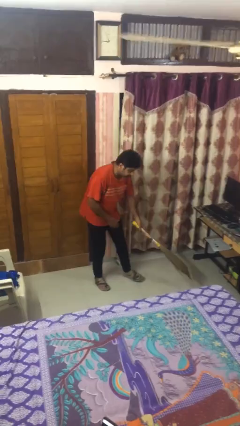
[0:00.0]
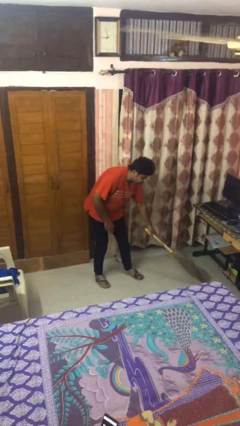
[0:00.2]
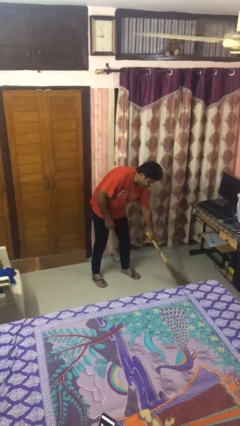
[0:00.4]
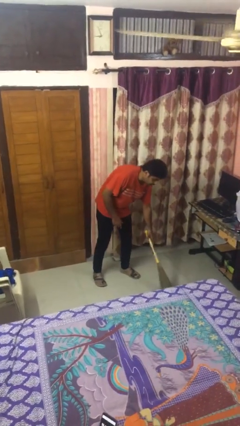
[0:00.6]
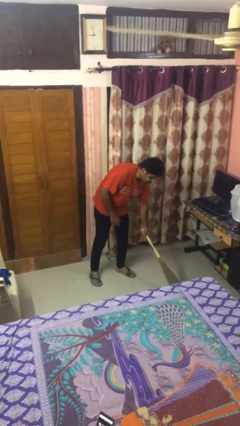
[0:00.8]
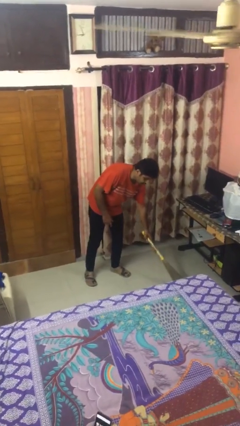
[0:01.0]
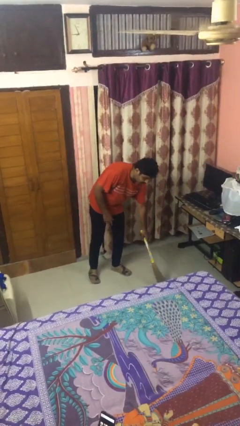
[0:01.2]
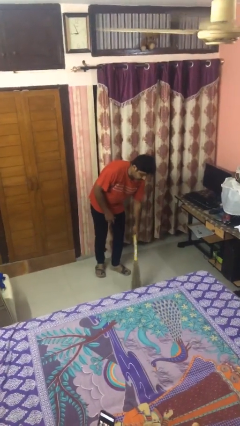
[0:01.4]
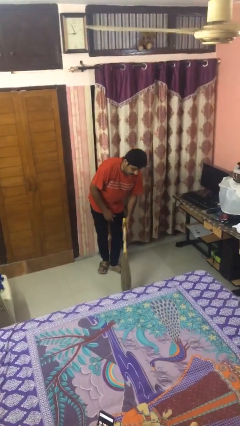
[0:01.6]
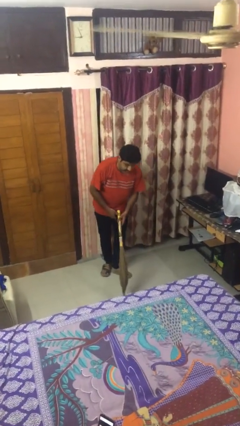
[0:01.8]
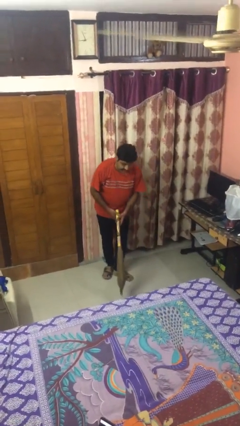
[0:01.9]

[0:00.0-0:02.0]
person sweeps floor

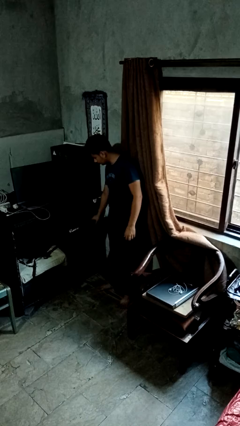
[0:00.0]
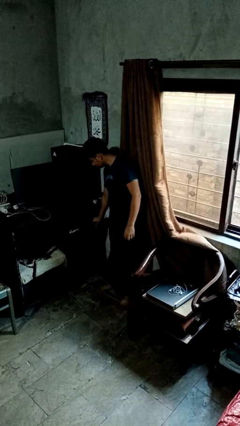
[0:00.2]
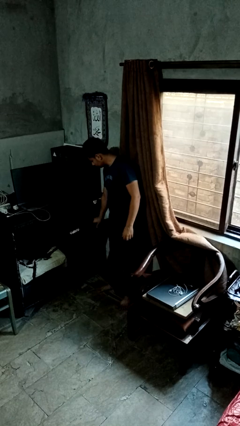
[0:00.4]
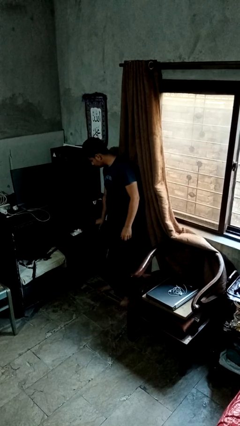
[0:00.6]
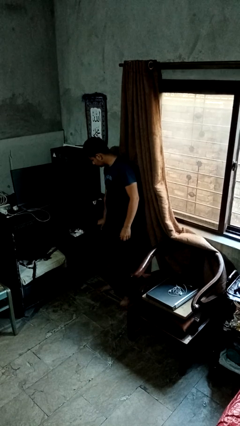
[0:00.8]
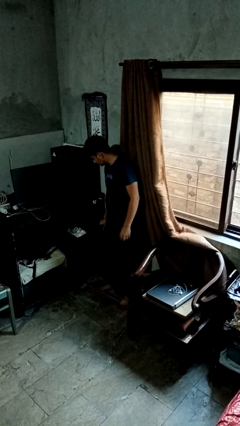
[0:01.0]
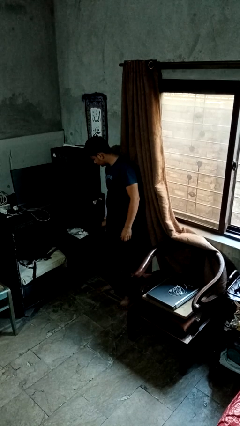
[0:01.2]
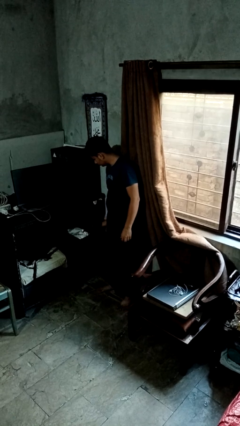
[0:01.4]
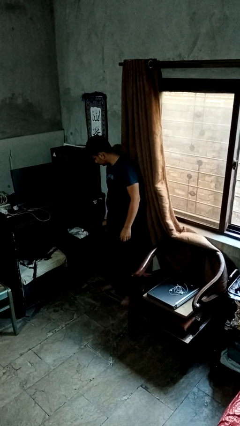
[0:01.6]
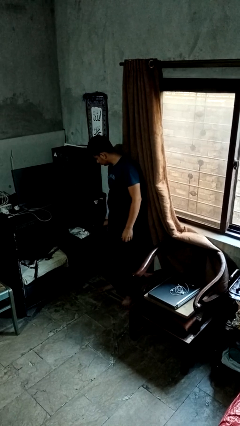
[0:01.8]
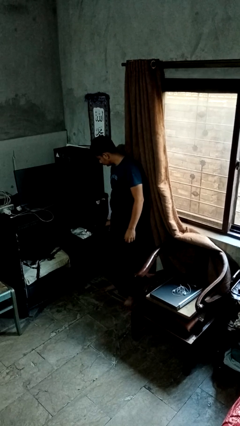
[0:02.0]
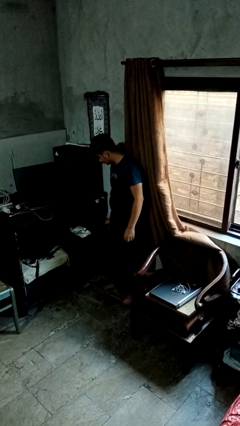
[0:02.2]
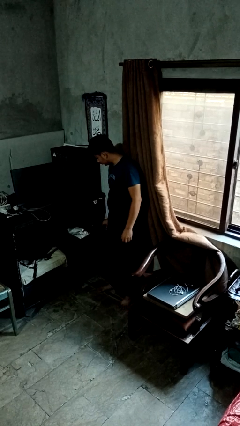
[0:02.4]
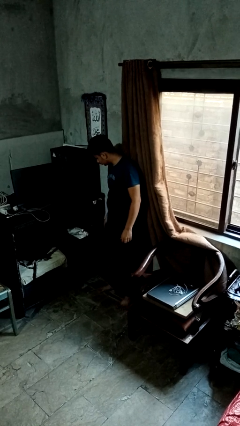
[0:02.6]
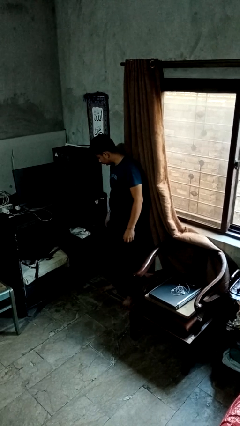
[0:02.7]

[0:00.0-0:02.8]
person opens dresser drawer

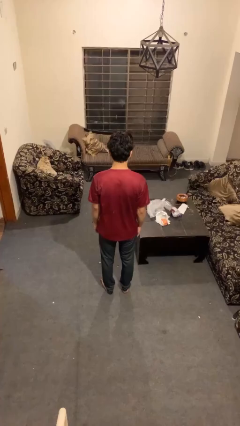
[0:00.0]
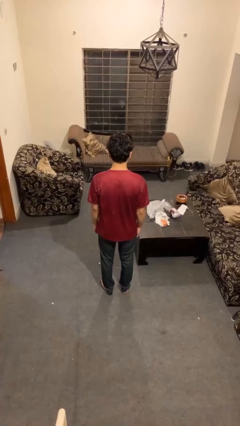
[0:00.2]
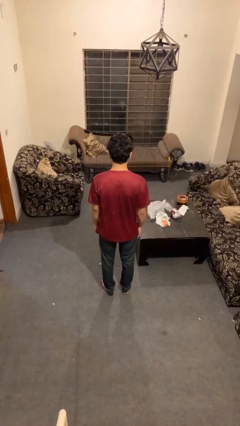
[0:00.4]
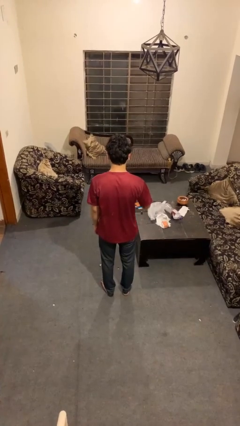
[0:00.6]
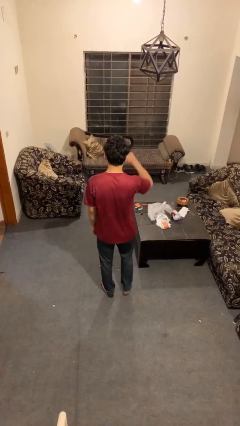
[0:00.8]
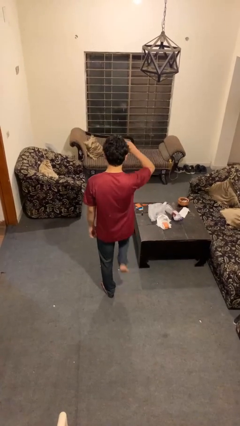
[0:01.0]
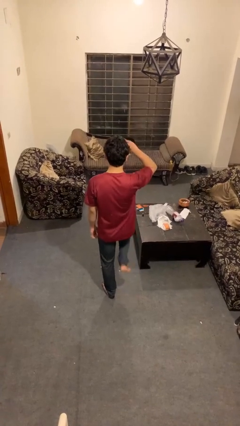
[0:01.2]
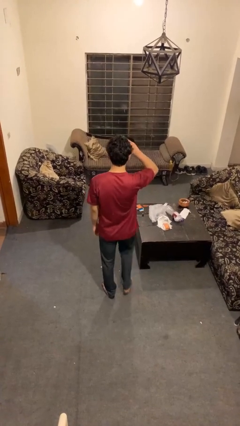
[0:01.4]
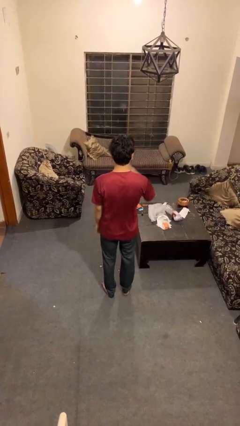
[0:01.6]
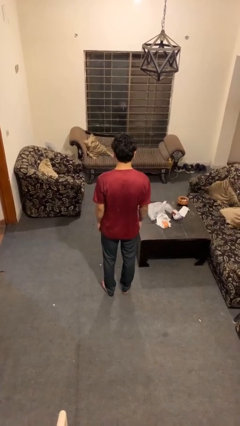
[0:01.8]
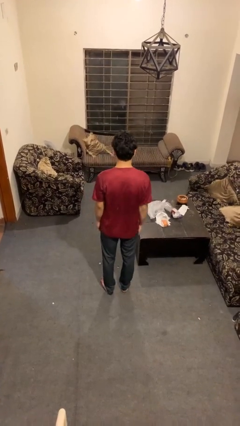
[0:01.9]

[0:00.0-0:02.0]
person salutes

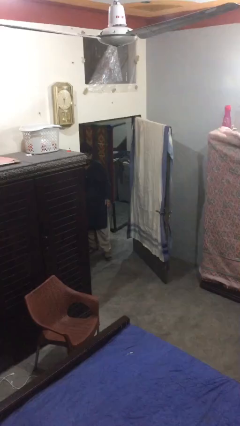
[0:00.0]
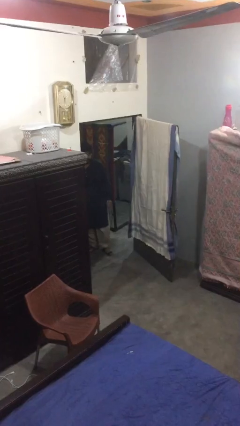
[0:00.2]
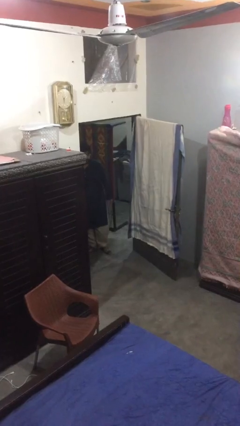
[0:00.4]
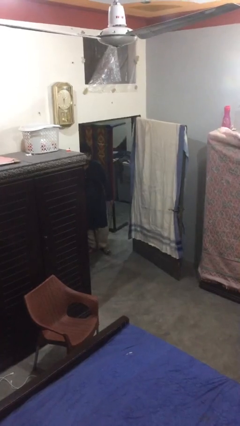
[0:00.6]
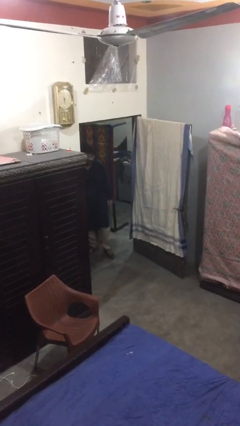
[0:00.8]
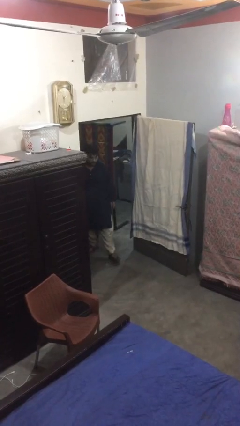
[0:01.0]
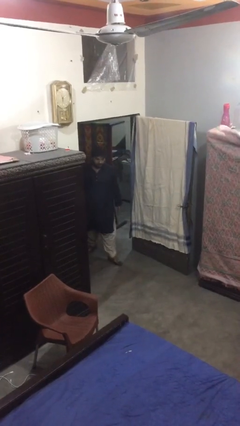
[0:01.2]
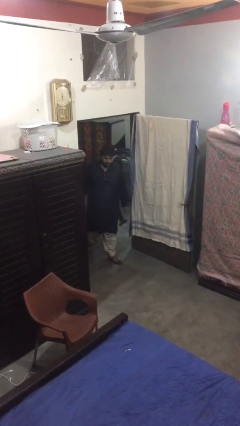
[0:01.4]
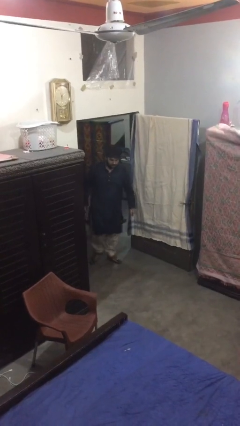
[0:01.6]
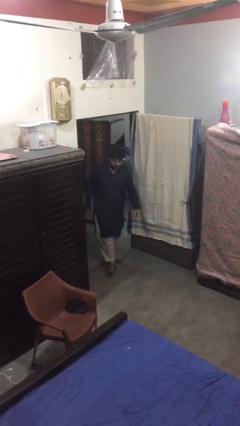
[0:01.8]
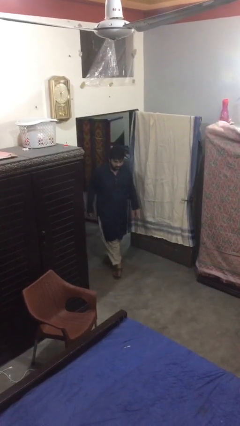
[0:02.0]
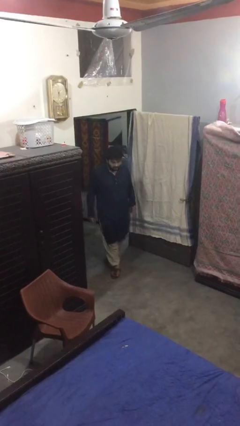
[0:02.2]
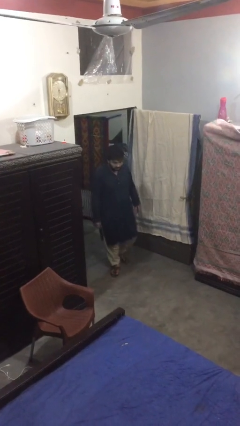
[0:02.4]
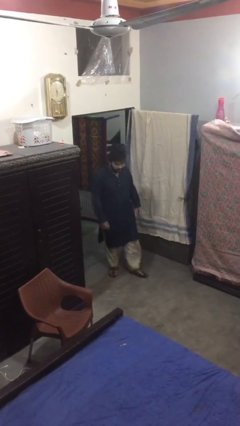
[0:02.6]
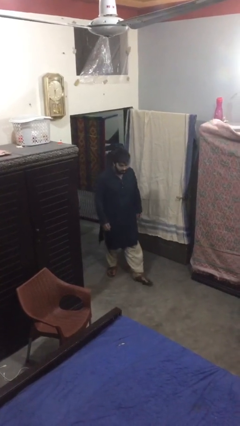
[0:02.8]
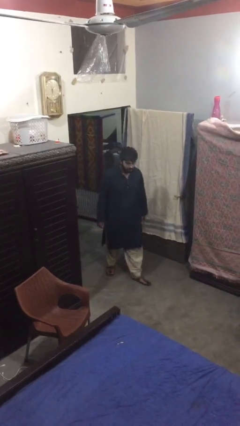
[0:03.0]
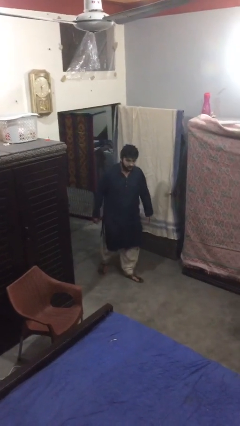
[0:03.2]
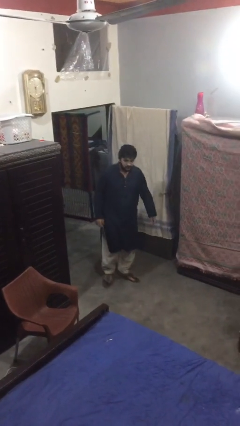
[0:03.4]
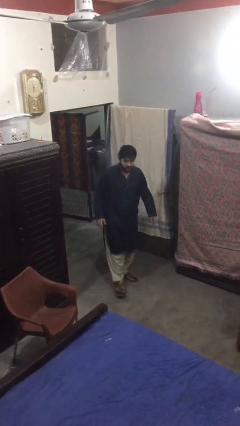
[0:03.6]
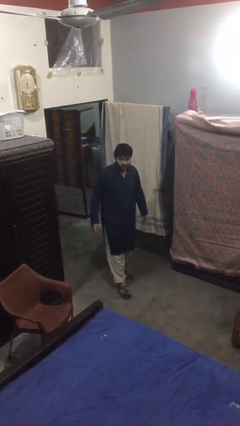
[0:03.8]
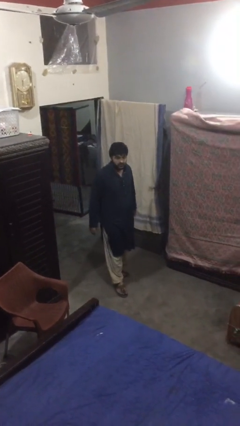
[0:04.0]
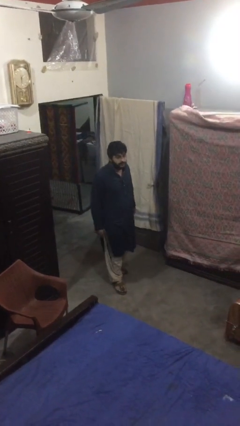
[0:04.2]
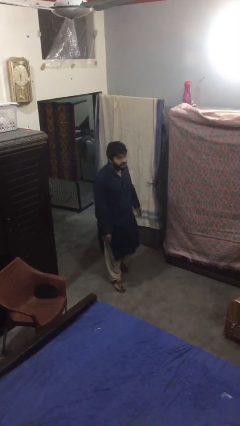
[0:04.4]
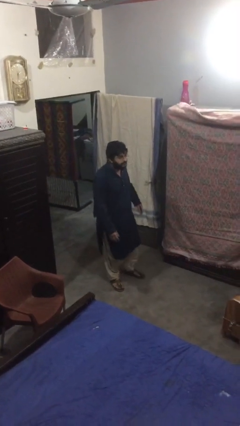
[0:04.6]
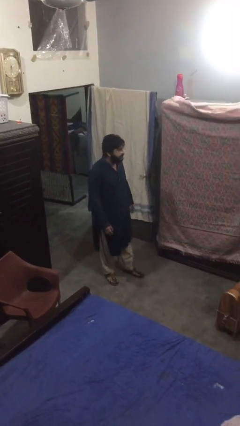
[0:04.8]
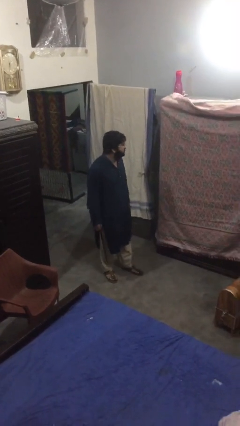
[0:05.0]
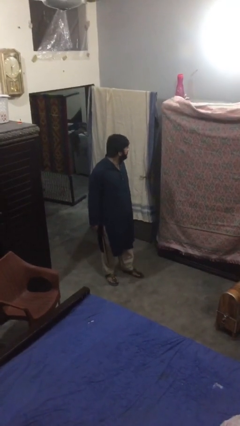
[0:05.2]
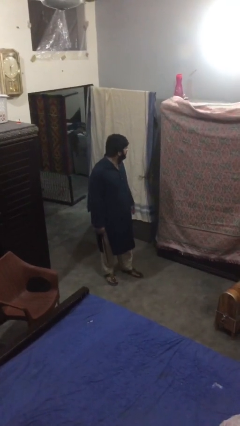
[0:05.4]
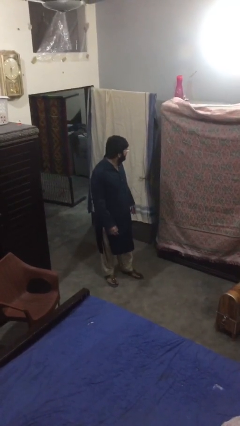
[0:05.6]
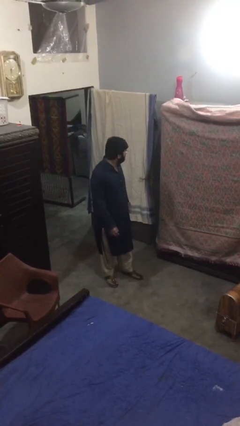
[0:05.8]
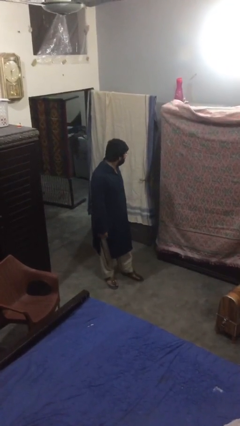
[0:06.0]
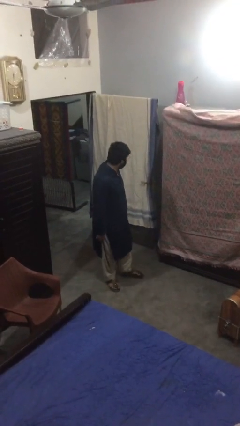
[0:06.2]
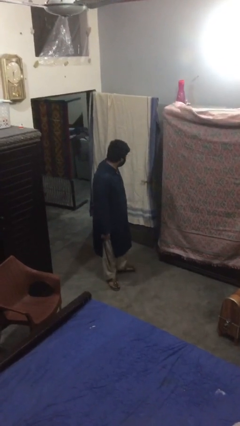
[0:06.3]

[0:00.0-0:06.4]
person enters scene through structure

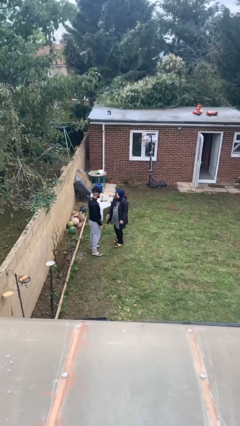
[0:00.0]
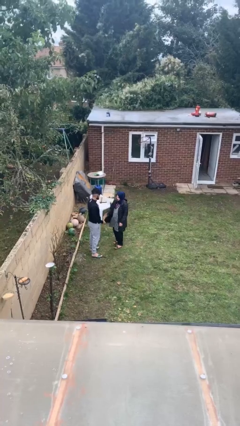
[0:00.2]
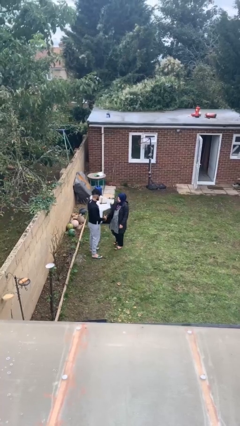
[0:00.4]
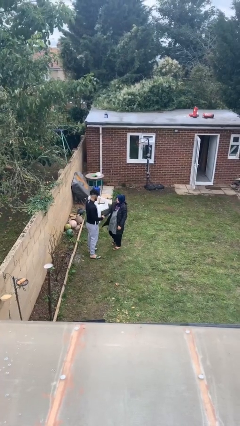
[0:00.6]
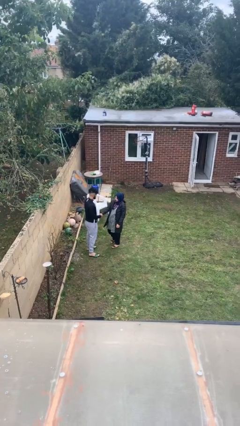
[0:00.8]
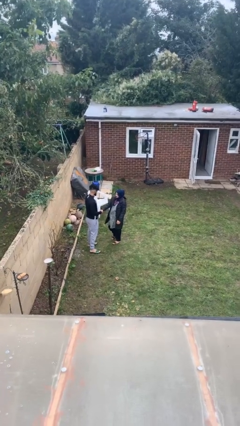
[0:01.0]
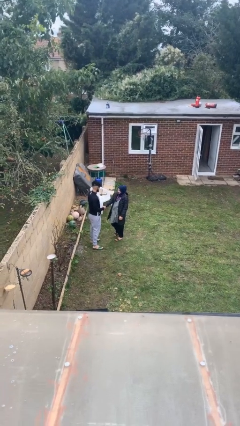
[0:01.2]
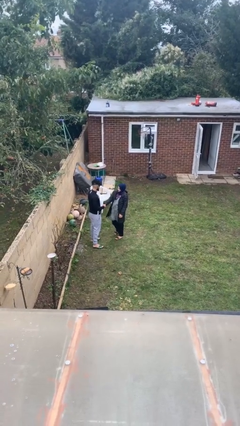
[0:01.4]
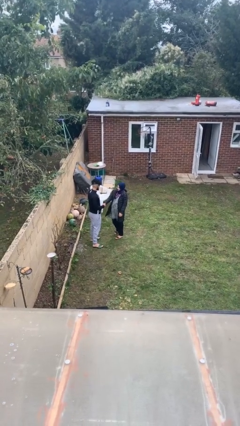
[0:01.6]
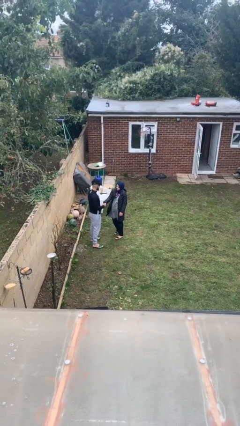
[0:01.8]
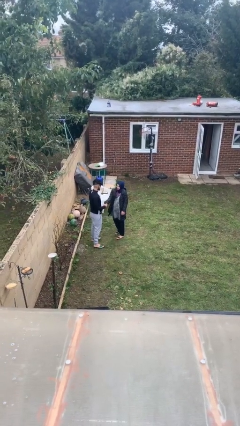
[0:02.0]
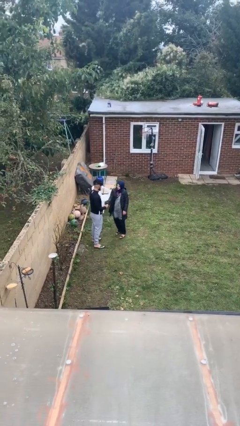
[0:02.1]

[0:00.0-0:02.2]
person shakes hand

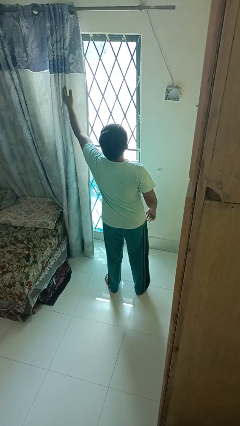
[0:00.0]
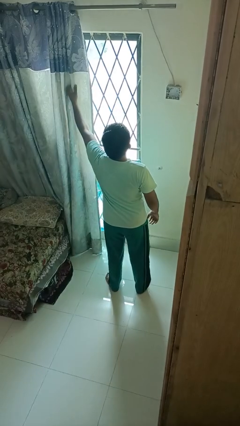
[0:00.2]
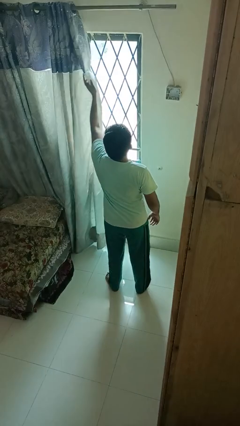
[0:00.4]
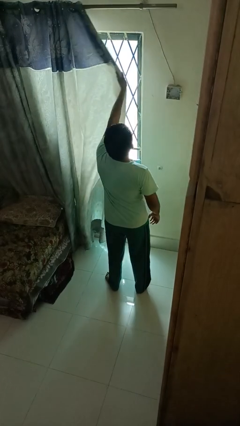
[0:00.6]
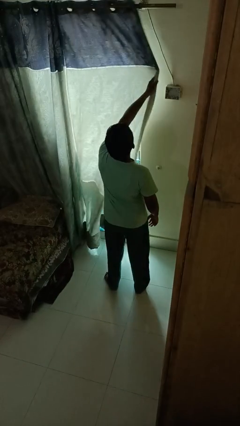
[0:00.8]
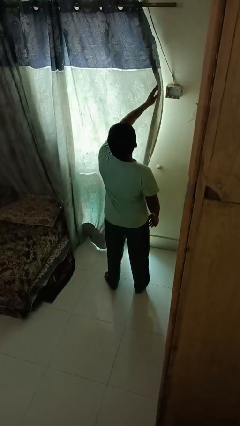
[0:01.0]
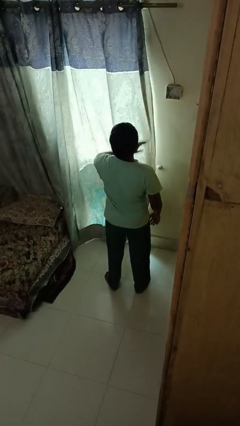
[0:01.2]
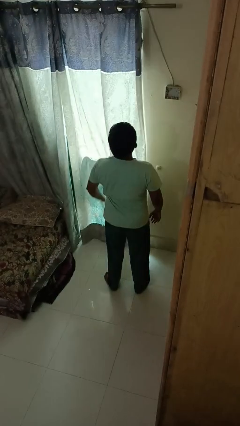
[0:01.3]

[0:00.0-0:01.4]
person closes curtains

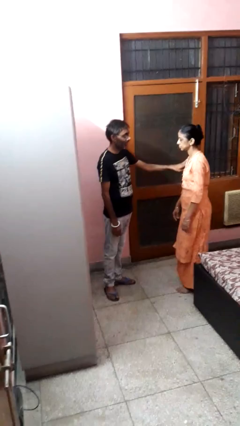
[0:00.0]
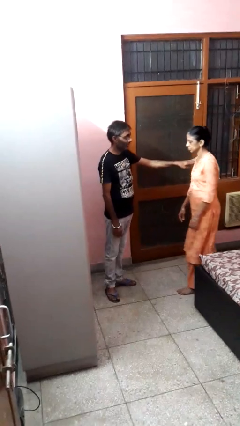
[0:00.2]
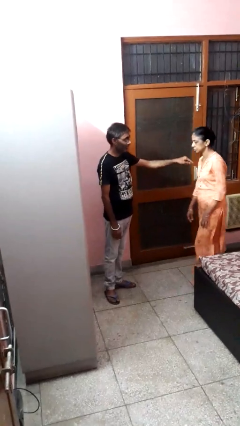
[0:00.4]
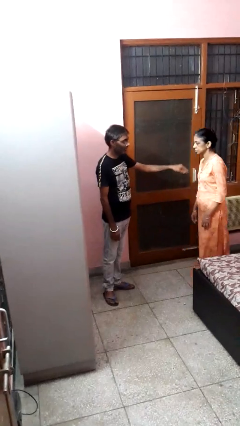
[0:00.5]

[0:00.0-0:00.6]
person shoves person
